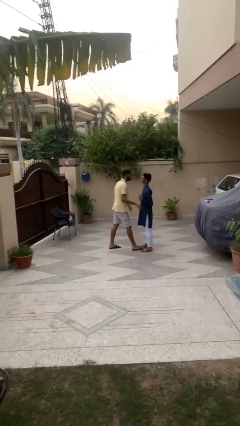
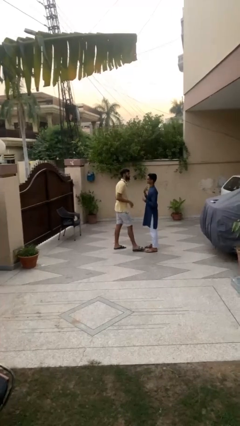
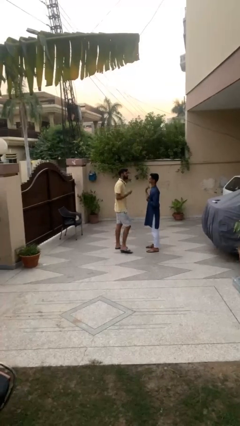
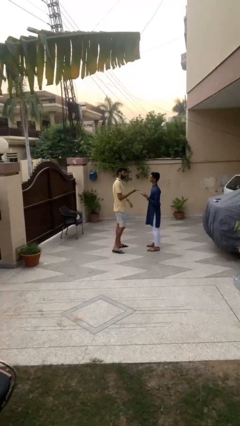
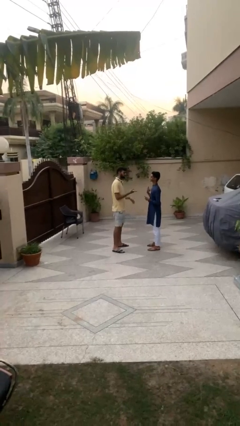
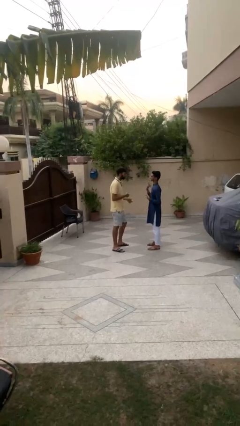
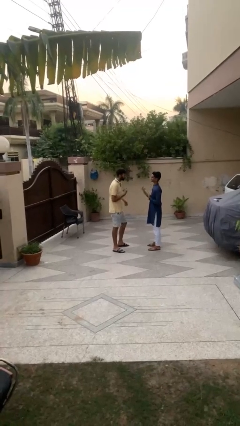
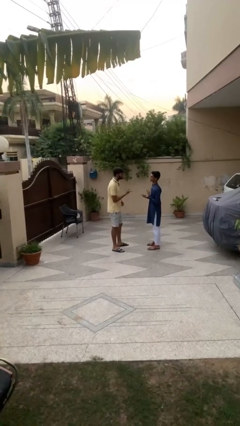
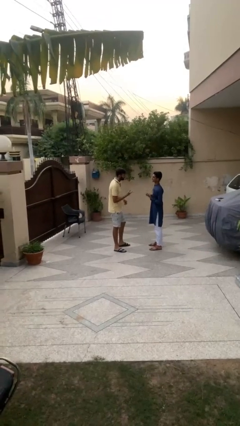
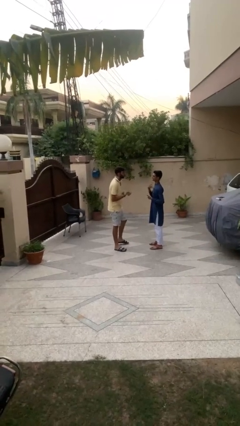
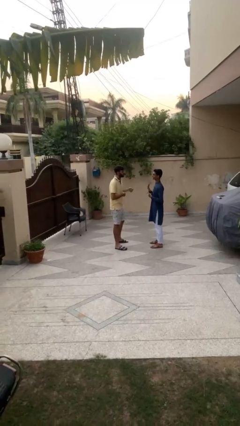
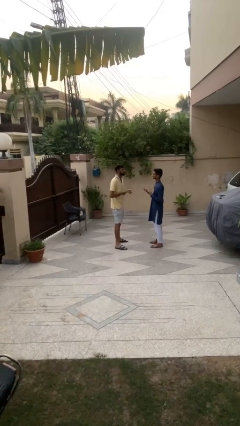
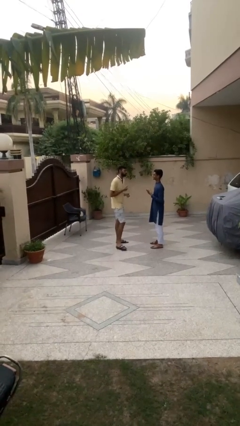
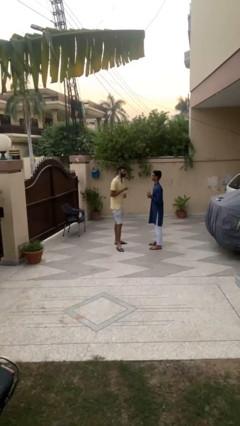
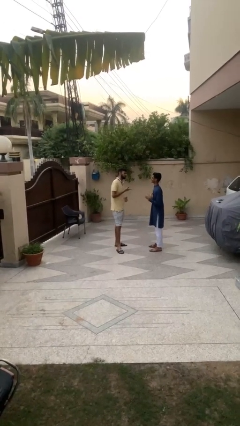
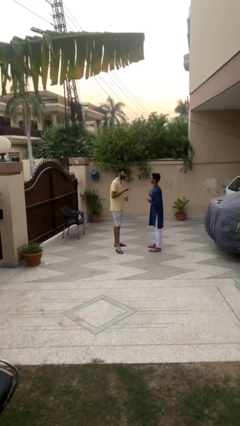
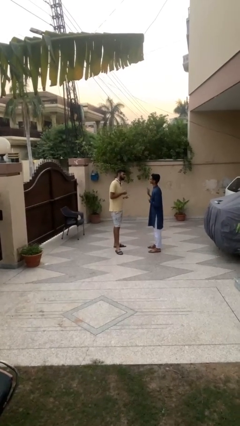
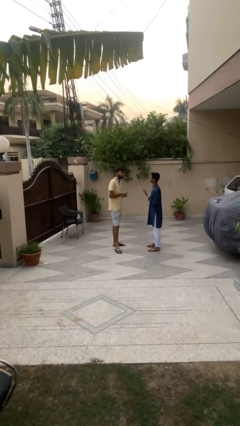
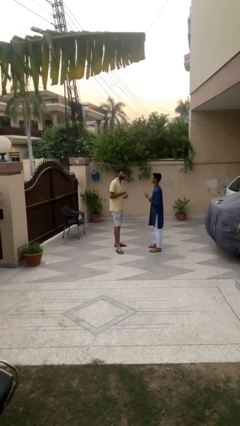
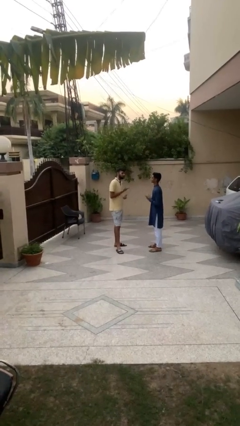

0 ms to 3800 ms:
person talks to person

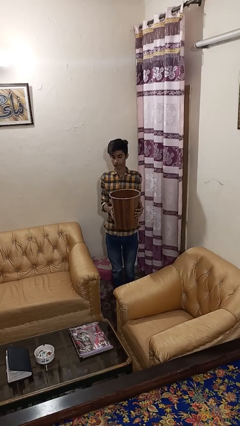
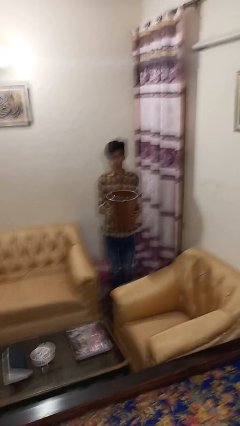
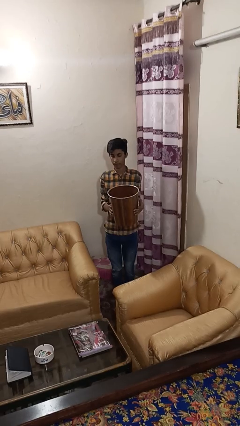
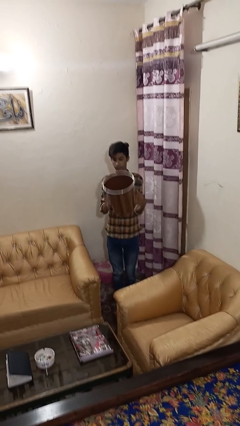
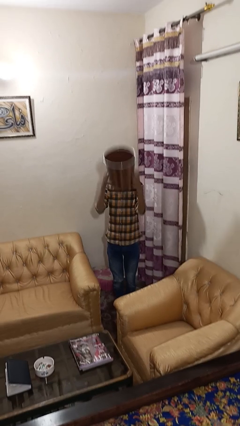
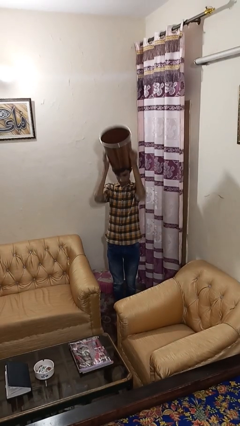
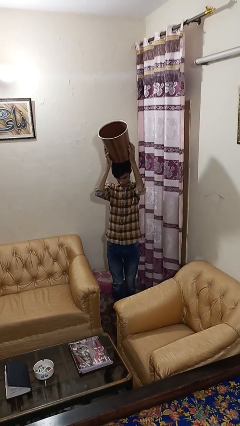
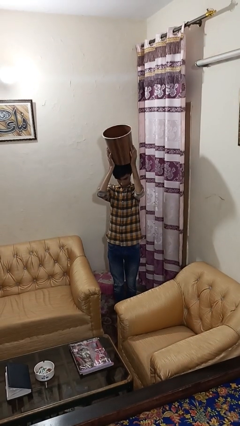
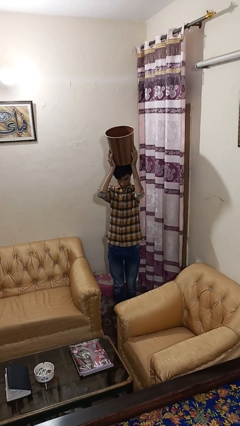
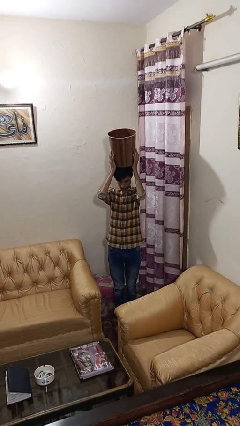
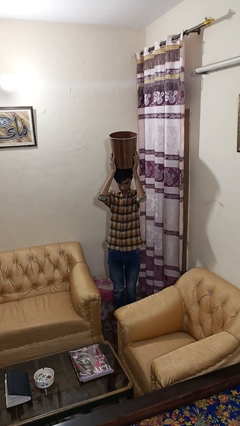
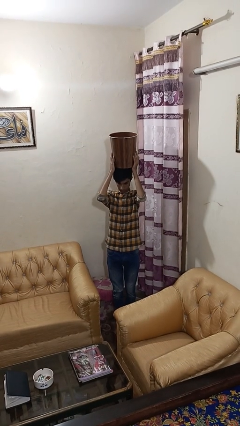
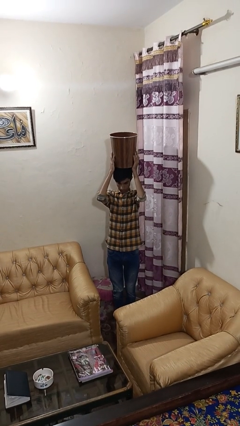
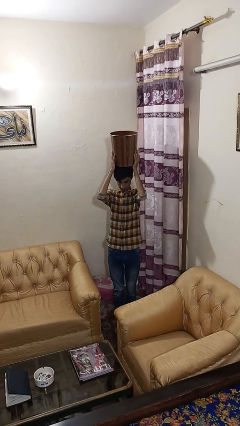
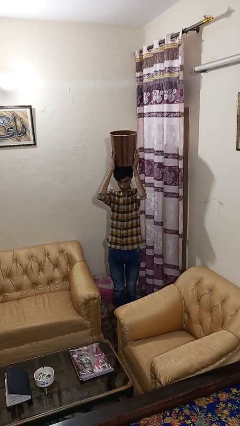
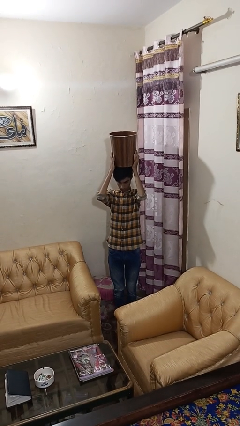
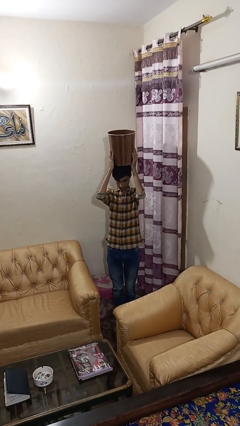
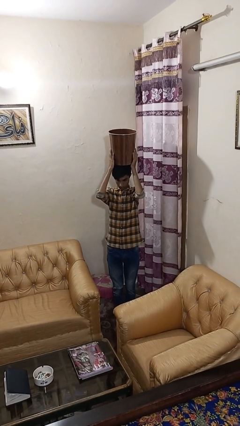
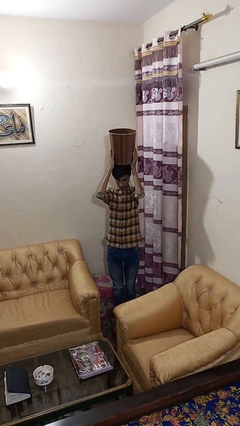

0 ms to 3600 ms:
person holds object above head

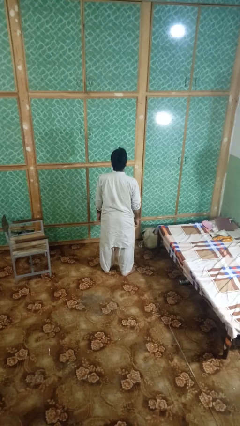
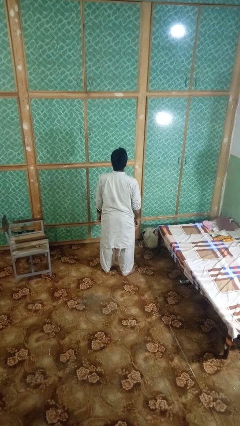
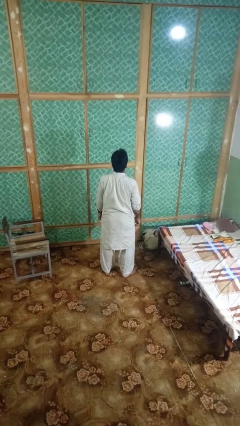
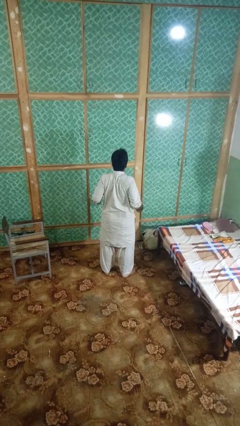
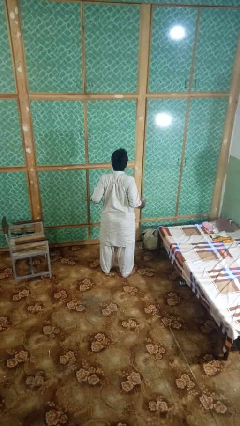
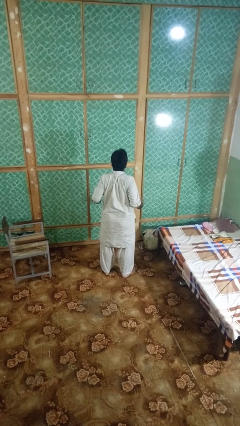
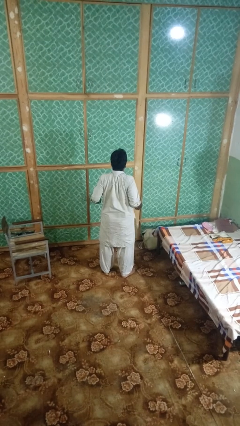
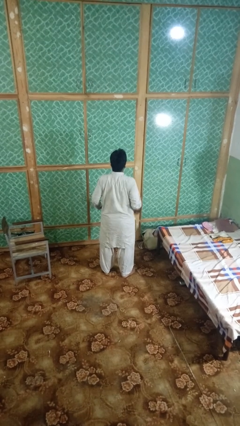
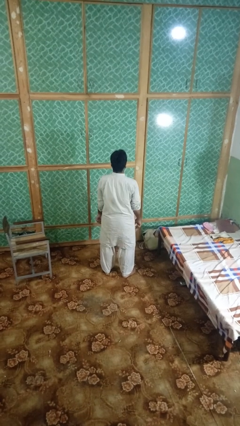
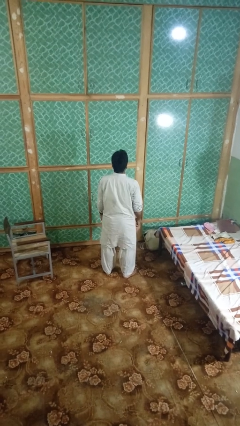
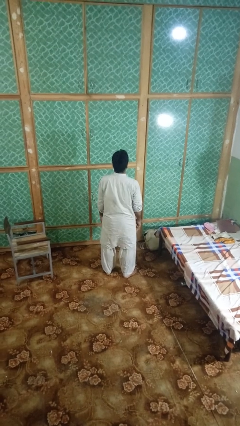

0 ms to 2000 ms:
person shrugs

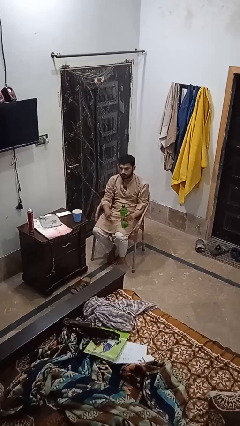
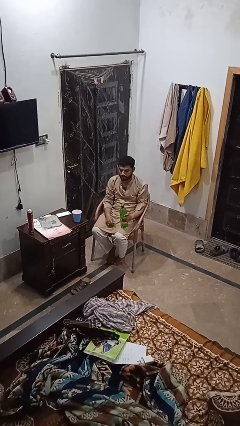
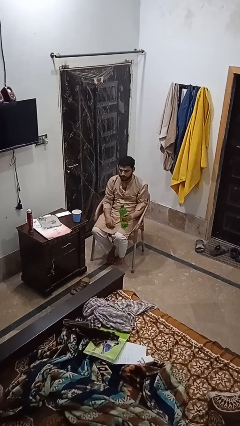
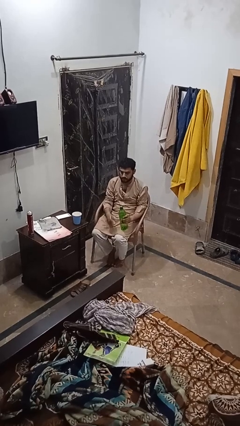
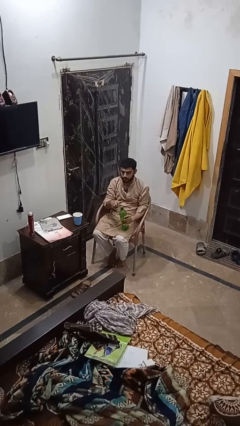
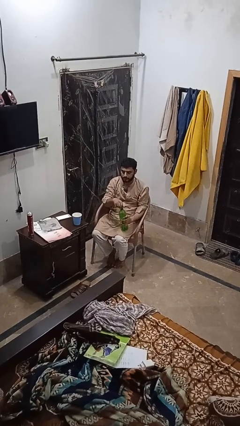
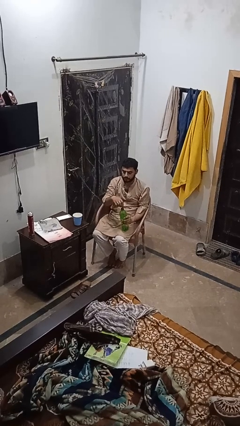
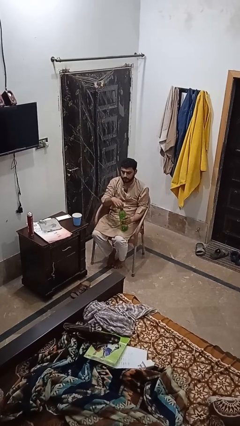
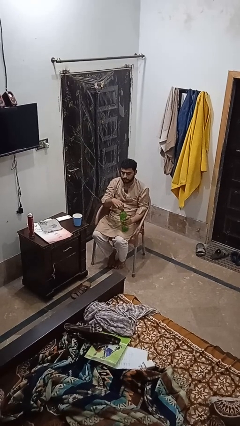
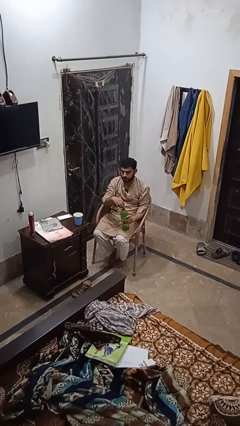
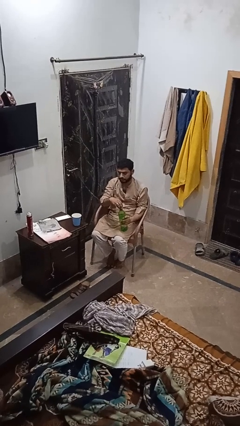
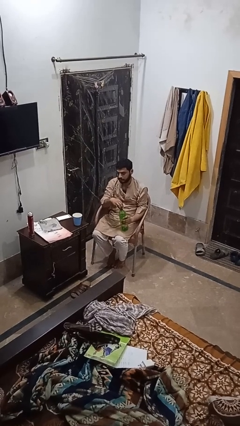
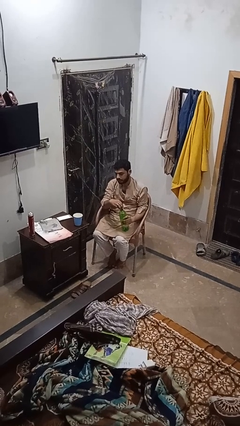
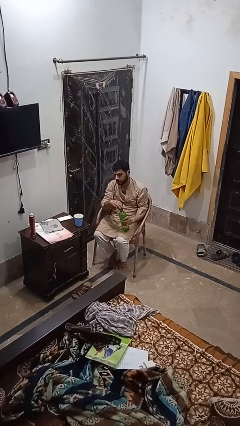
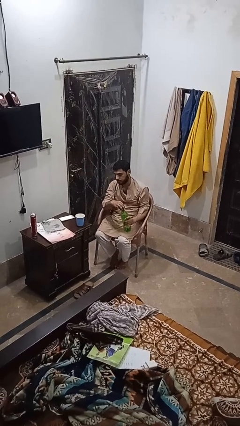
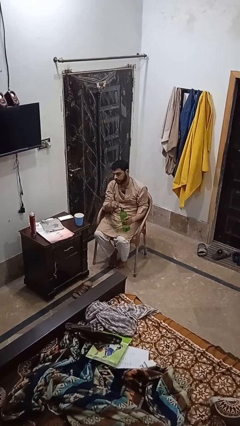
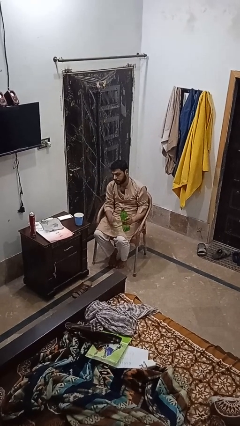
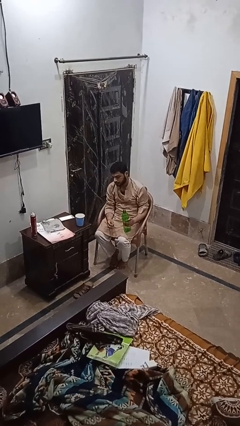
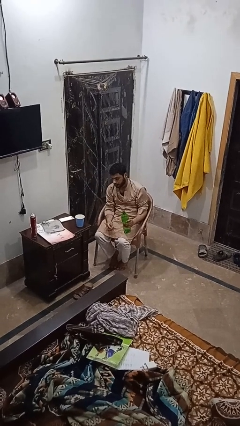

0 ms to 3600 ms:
person unscrews lid from bottle

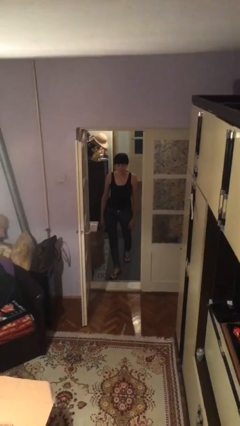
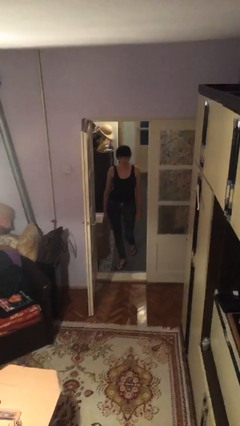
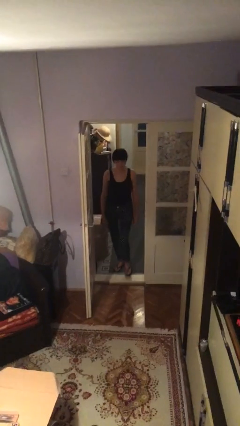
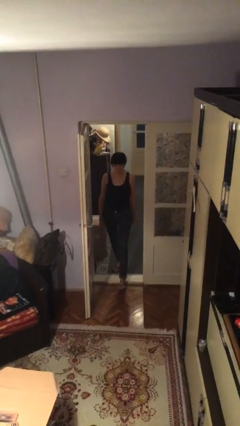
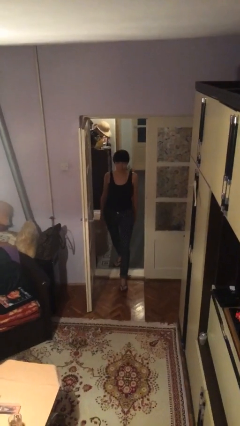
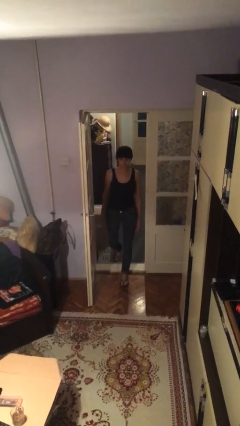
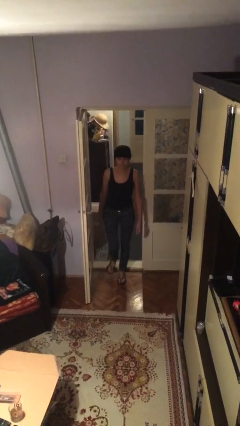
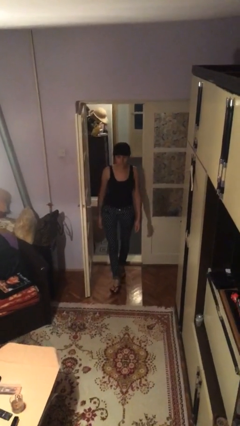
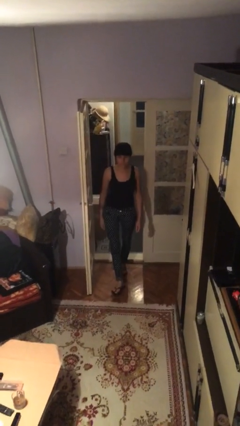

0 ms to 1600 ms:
person enters scene through structure

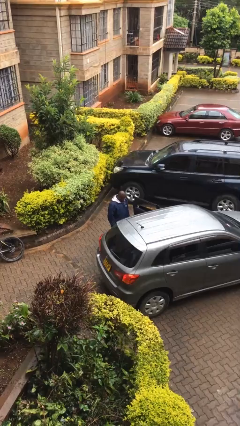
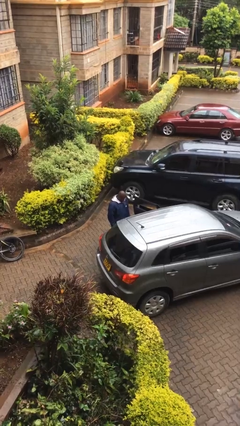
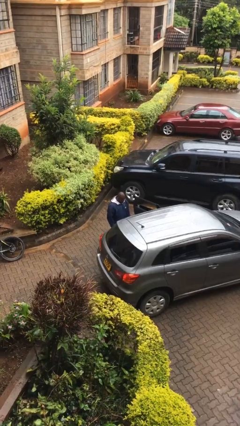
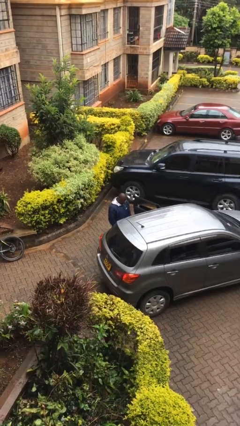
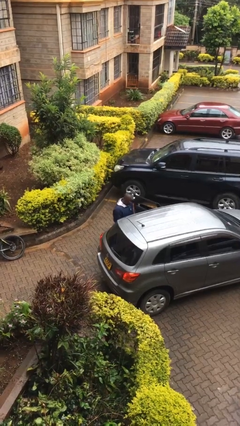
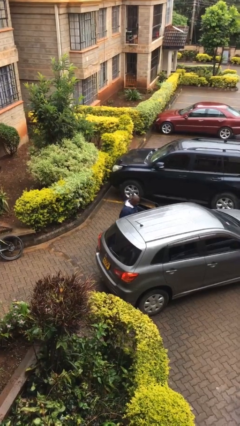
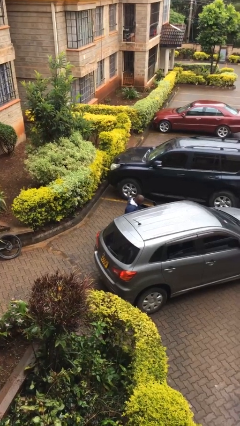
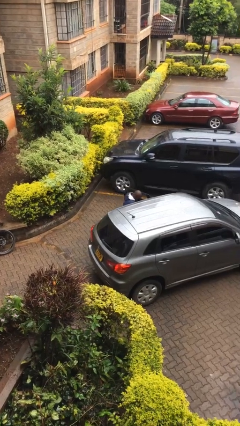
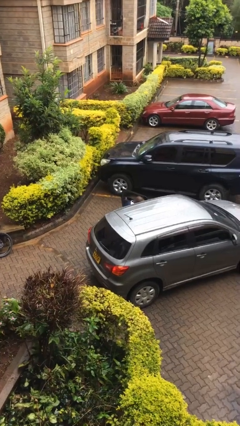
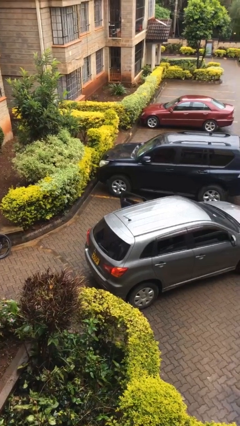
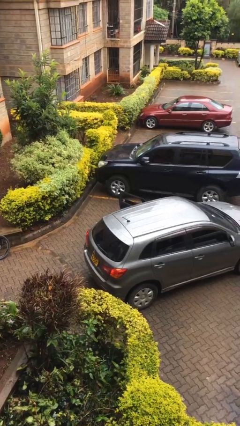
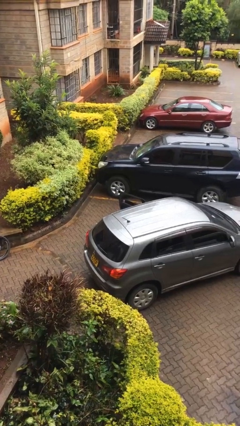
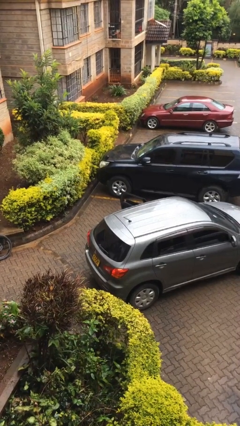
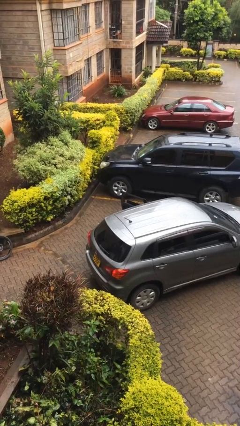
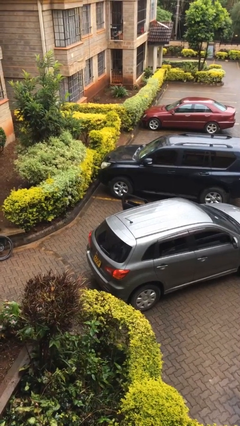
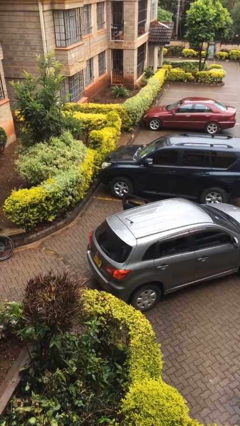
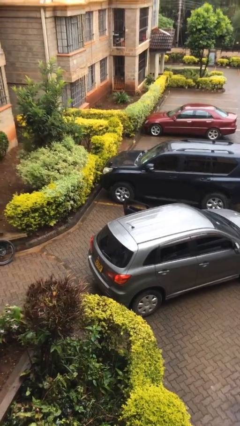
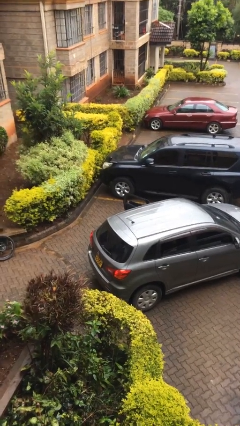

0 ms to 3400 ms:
person enters car
